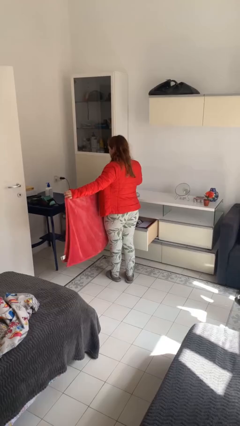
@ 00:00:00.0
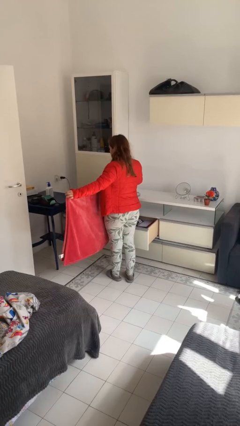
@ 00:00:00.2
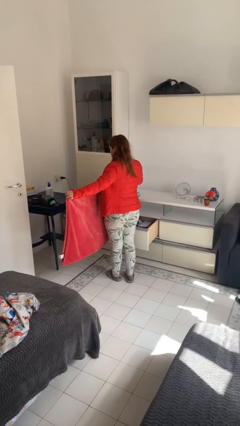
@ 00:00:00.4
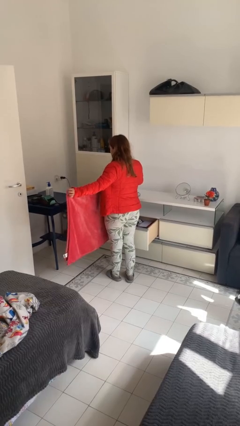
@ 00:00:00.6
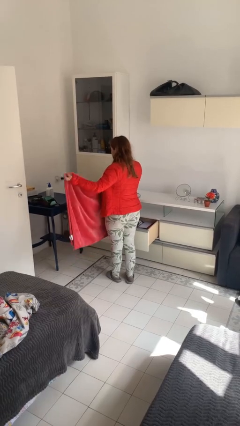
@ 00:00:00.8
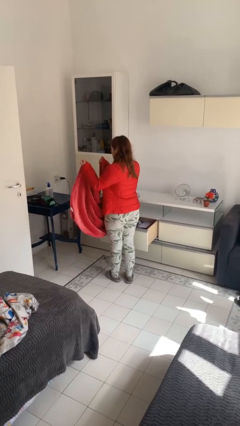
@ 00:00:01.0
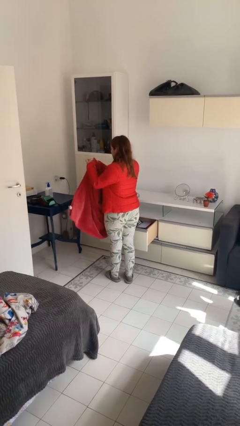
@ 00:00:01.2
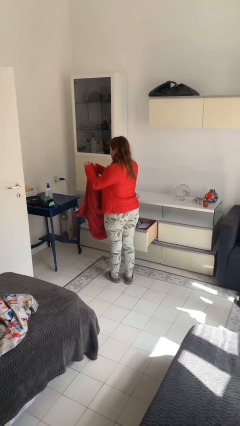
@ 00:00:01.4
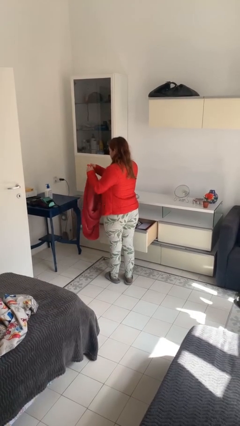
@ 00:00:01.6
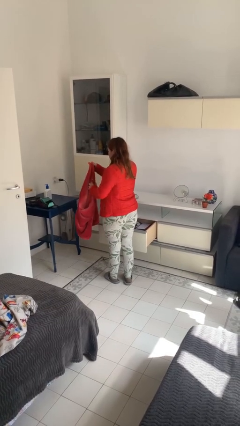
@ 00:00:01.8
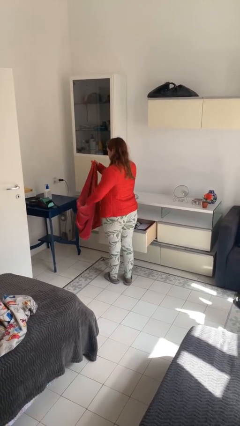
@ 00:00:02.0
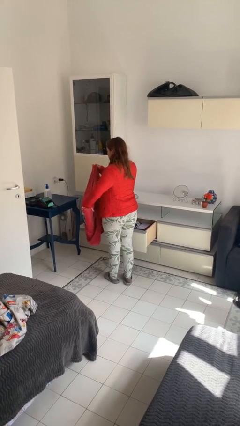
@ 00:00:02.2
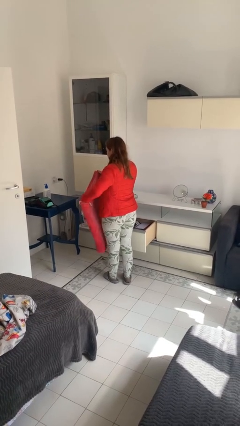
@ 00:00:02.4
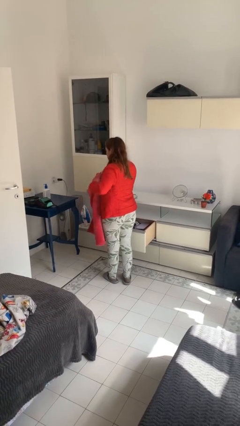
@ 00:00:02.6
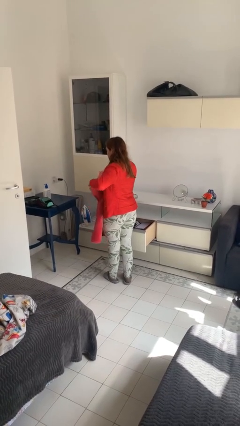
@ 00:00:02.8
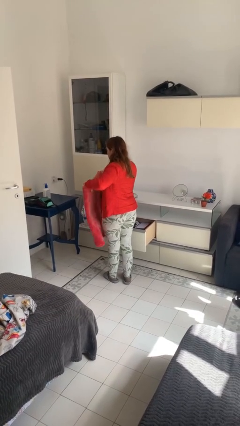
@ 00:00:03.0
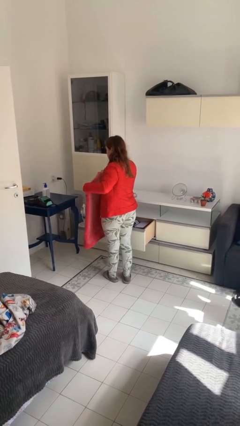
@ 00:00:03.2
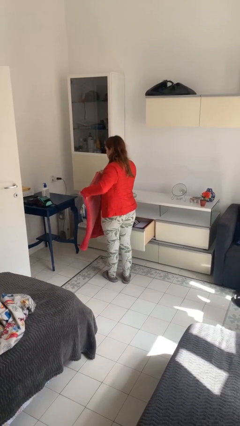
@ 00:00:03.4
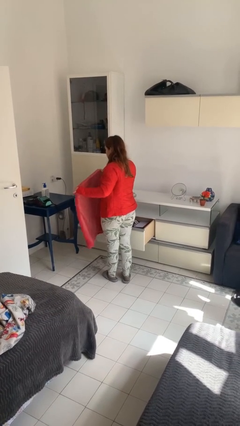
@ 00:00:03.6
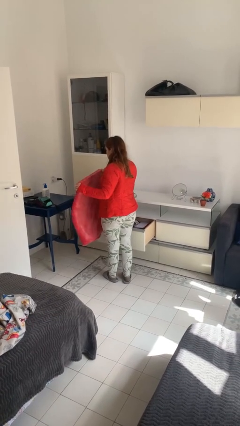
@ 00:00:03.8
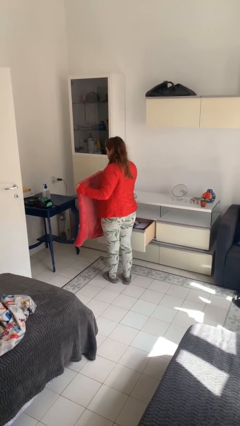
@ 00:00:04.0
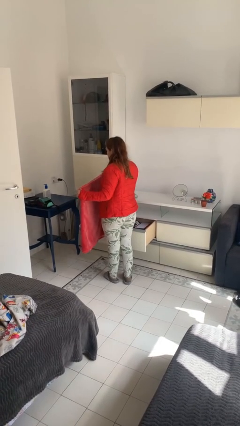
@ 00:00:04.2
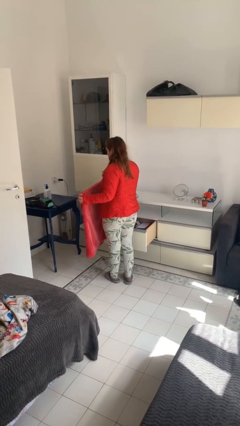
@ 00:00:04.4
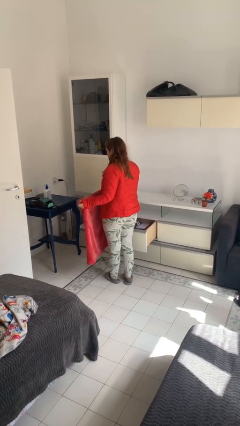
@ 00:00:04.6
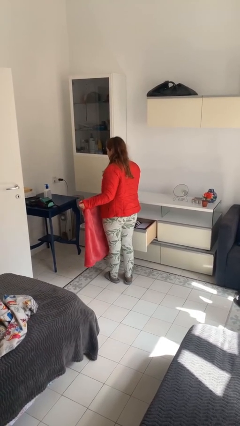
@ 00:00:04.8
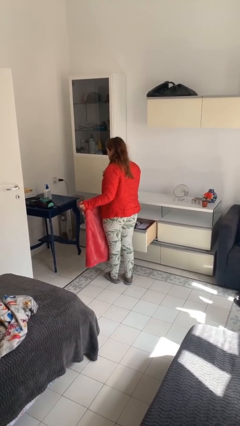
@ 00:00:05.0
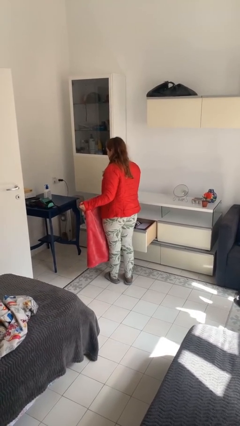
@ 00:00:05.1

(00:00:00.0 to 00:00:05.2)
person unfolds blanket

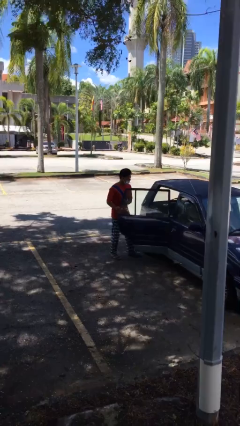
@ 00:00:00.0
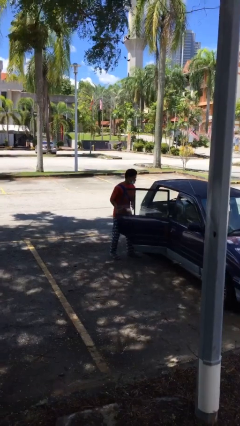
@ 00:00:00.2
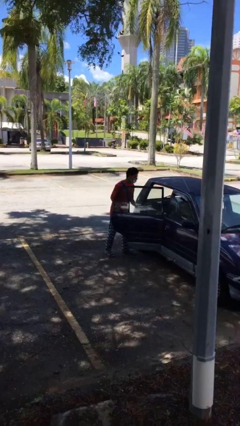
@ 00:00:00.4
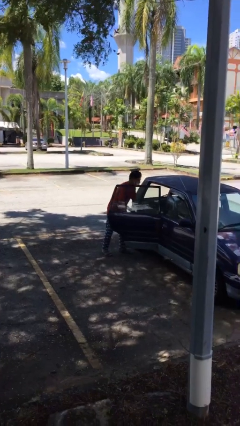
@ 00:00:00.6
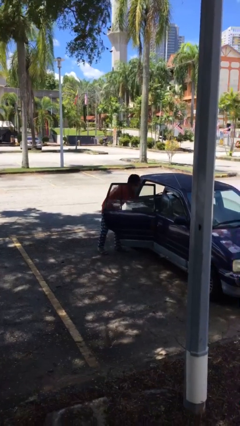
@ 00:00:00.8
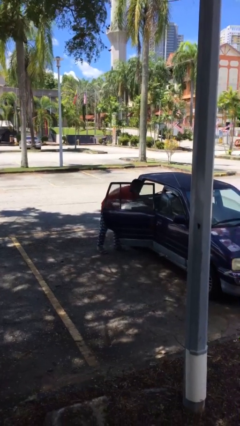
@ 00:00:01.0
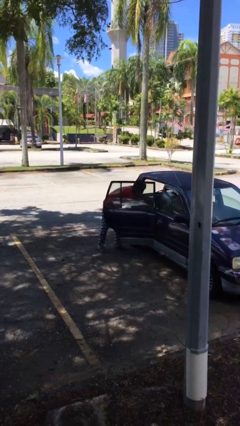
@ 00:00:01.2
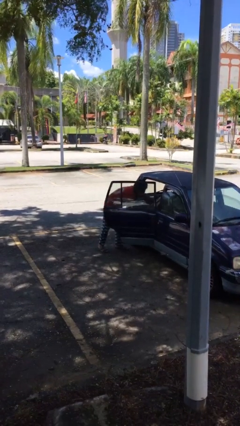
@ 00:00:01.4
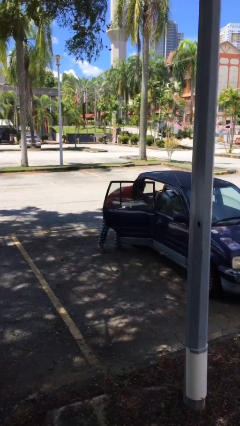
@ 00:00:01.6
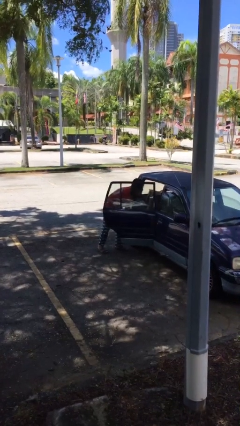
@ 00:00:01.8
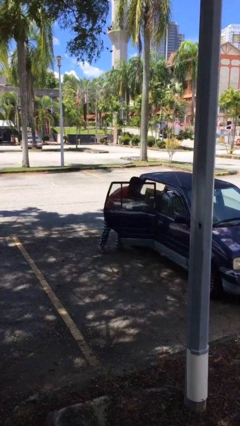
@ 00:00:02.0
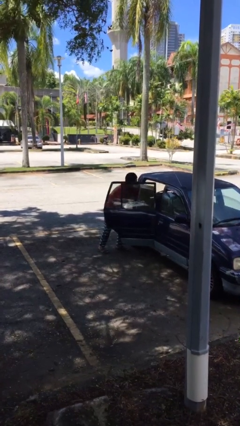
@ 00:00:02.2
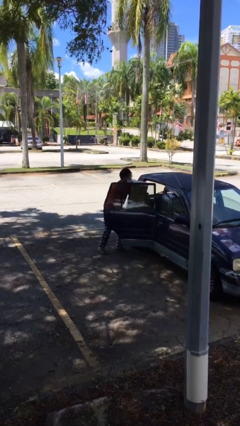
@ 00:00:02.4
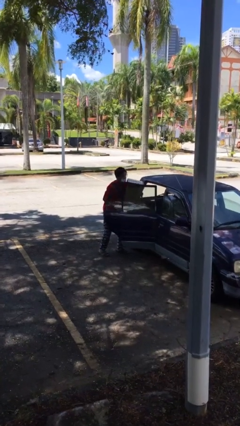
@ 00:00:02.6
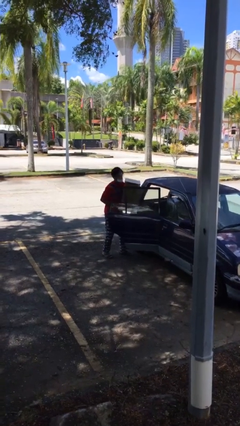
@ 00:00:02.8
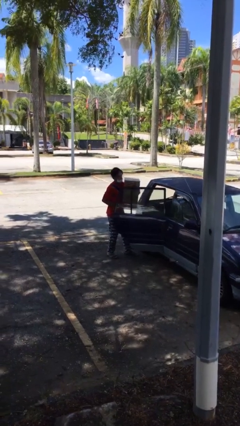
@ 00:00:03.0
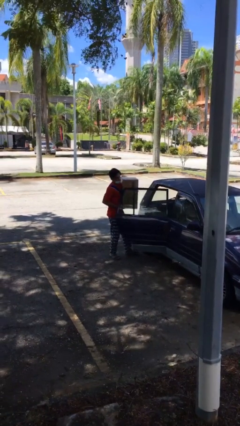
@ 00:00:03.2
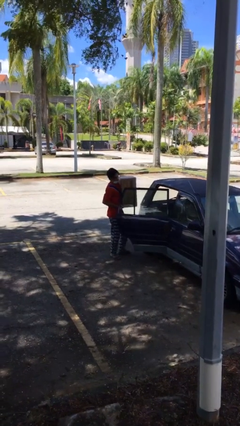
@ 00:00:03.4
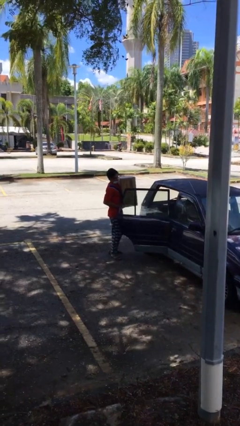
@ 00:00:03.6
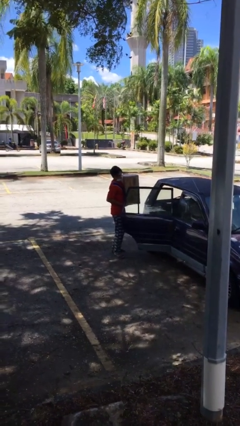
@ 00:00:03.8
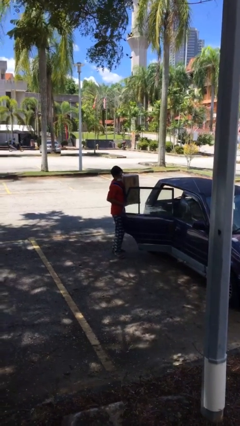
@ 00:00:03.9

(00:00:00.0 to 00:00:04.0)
person unloads car

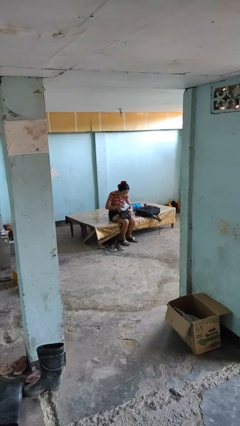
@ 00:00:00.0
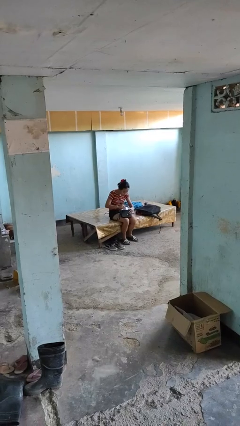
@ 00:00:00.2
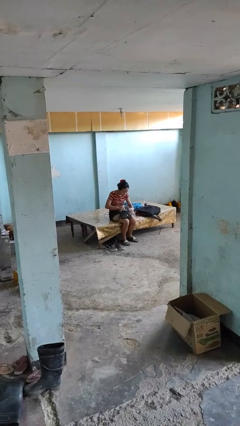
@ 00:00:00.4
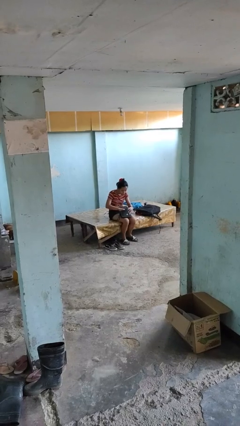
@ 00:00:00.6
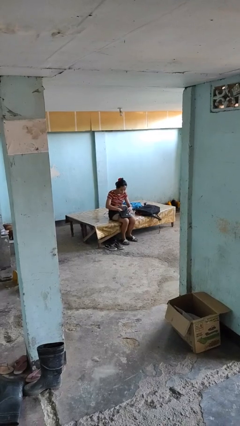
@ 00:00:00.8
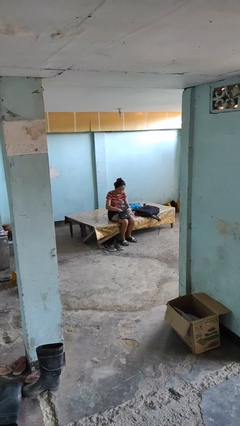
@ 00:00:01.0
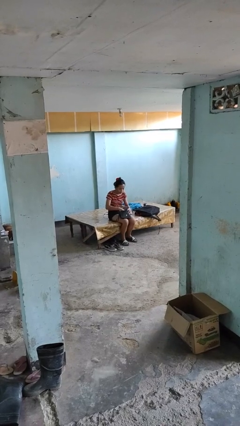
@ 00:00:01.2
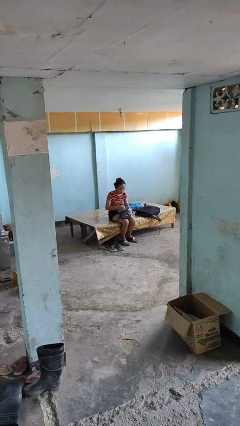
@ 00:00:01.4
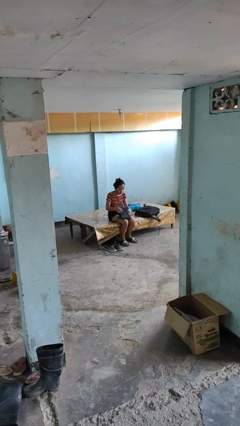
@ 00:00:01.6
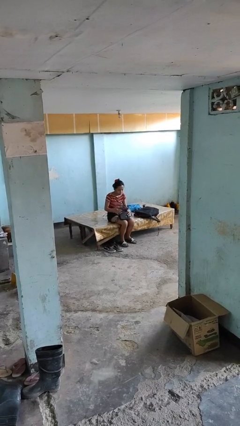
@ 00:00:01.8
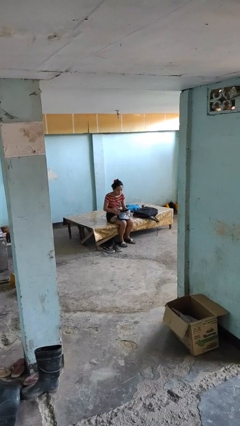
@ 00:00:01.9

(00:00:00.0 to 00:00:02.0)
person puts object into purse

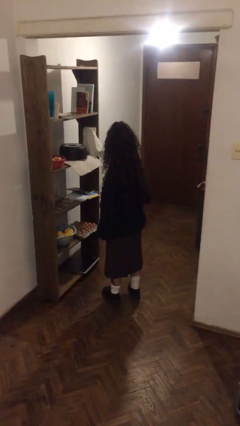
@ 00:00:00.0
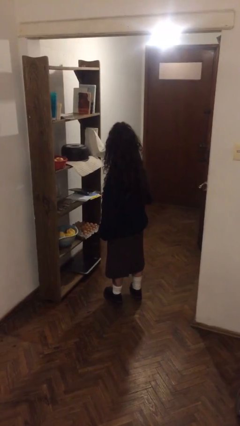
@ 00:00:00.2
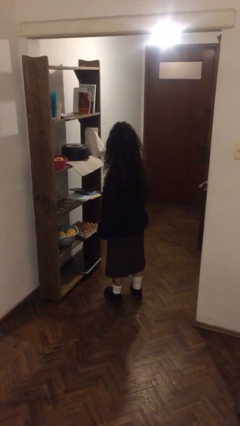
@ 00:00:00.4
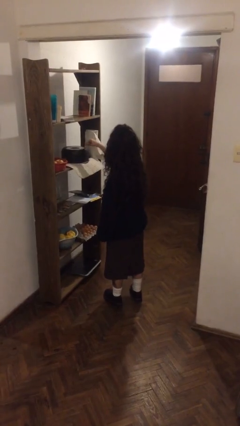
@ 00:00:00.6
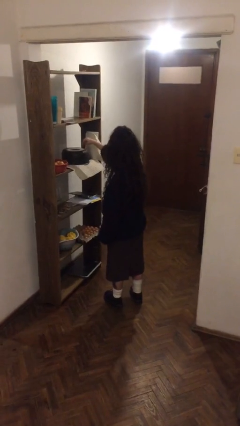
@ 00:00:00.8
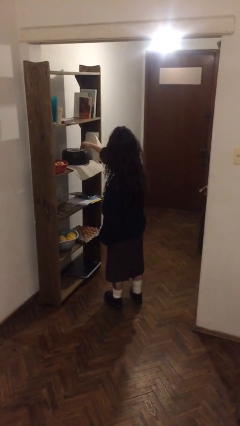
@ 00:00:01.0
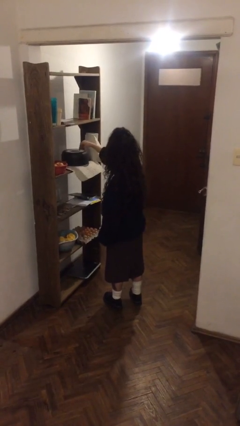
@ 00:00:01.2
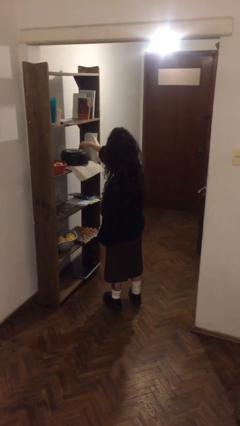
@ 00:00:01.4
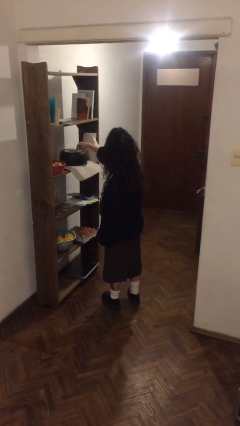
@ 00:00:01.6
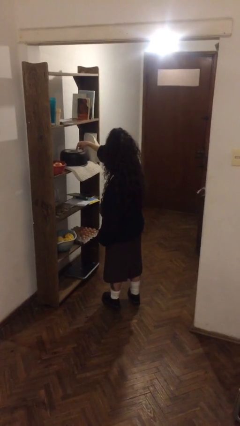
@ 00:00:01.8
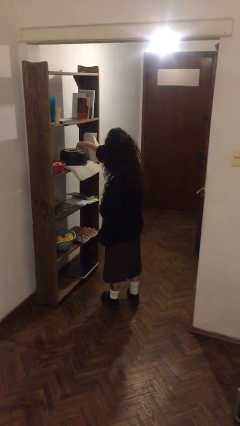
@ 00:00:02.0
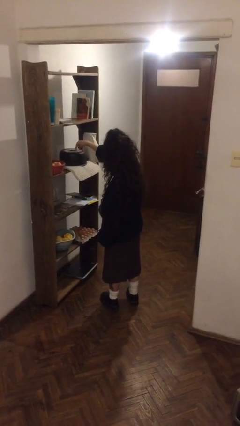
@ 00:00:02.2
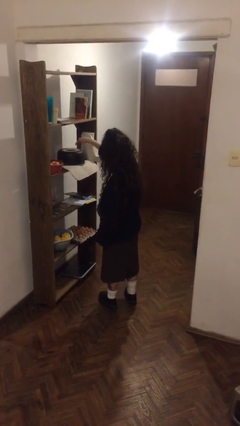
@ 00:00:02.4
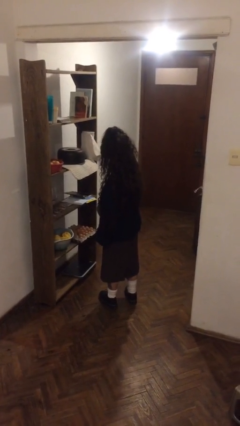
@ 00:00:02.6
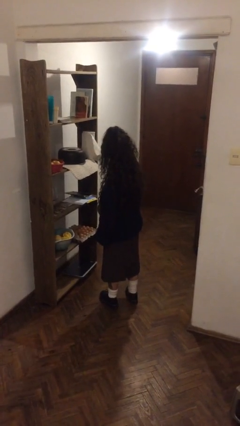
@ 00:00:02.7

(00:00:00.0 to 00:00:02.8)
person taps object with finger

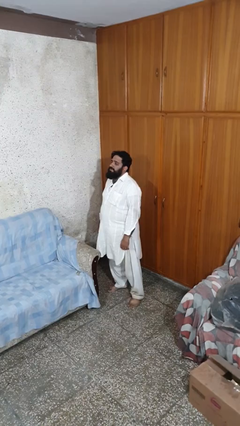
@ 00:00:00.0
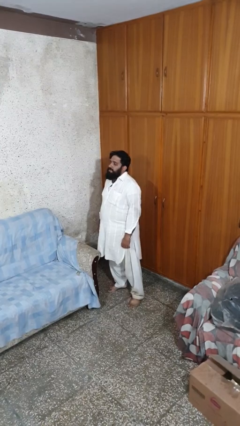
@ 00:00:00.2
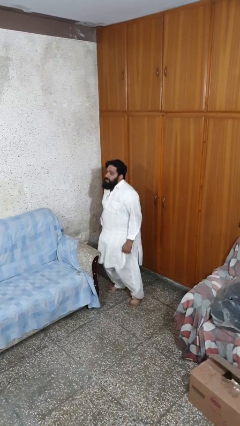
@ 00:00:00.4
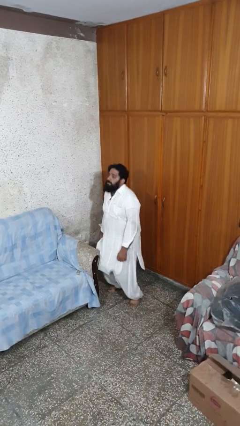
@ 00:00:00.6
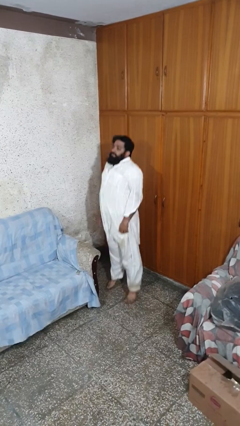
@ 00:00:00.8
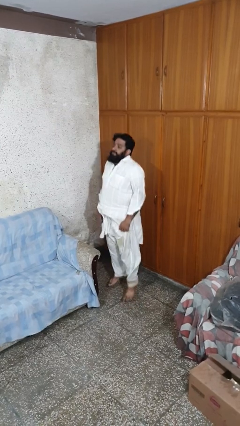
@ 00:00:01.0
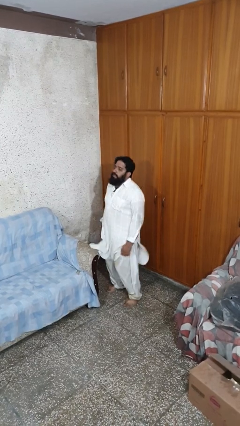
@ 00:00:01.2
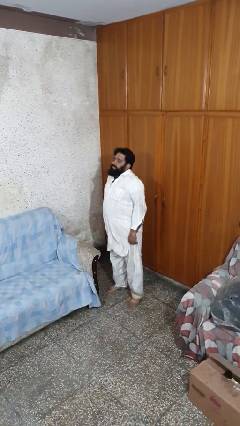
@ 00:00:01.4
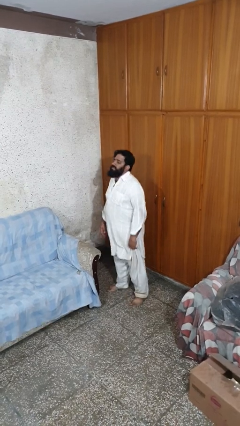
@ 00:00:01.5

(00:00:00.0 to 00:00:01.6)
person jumps
